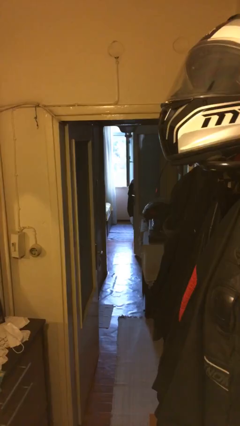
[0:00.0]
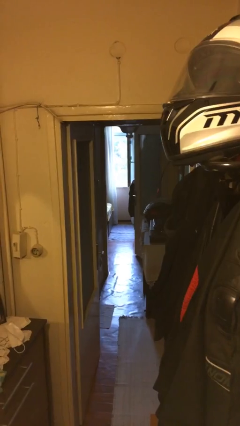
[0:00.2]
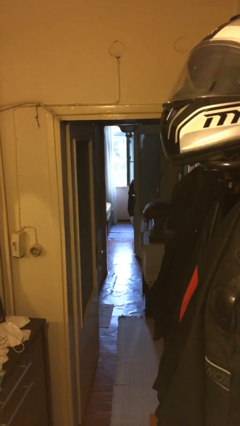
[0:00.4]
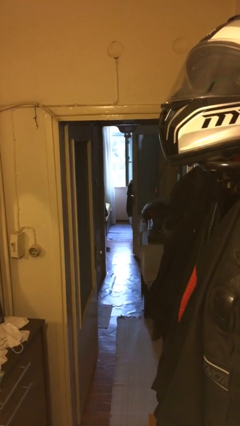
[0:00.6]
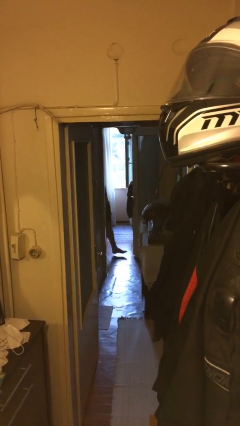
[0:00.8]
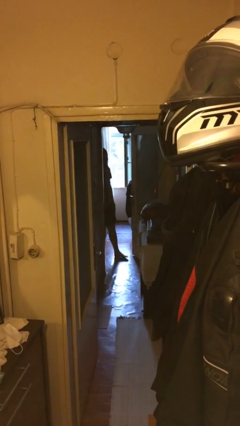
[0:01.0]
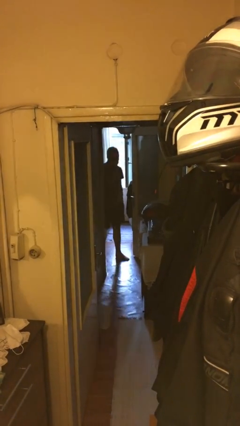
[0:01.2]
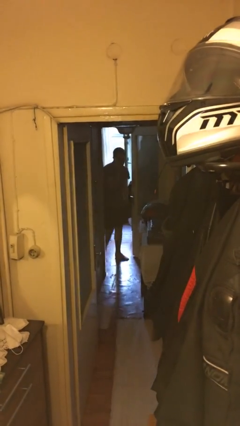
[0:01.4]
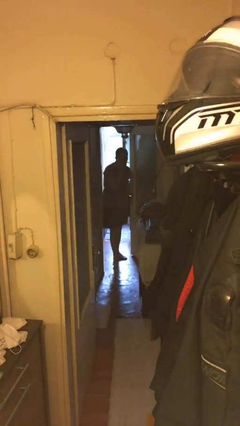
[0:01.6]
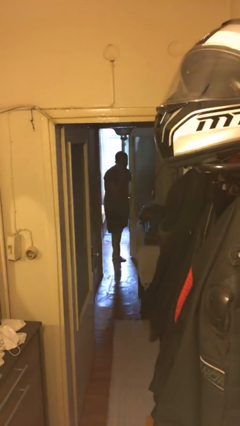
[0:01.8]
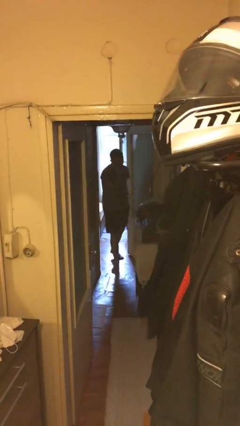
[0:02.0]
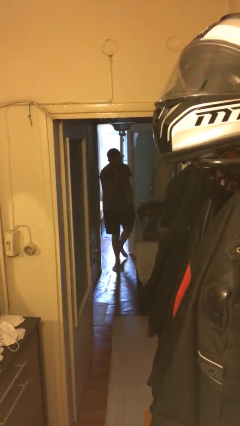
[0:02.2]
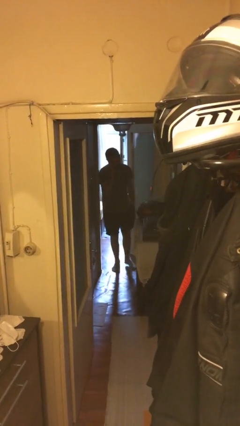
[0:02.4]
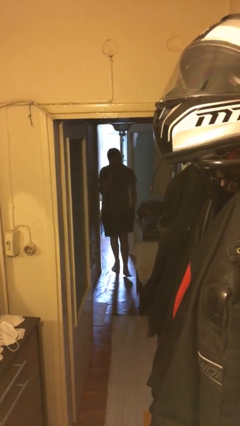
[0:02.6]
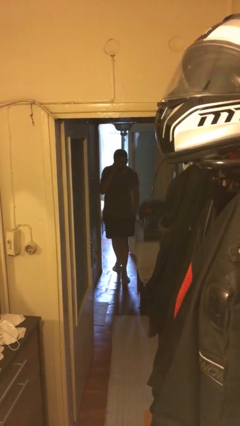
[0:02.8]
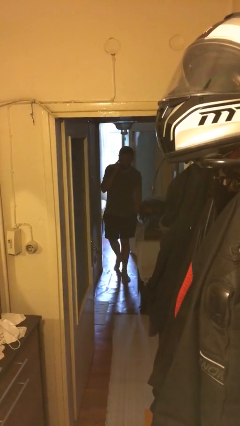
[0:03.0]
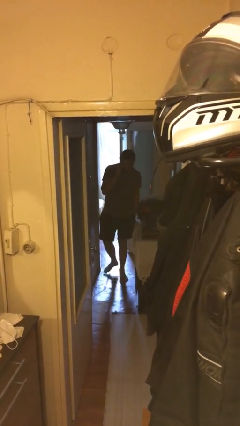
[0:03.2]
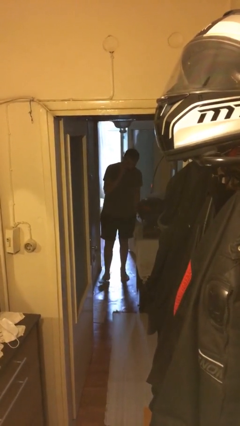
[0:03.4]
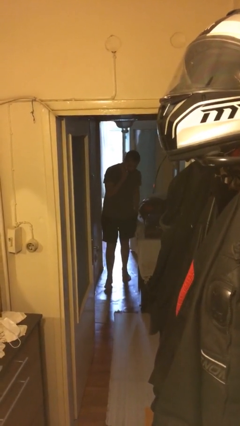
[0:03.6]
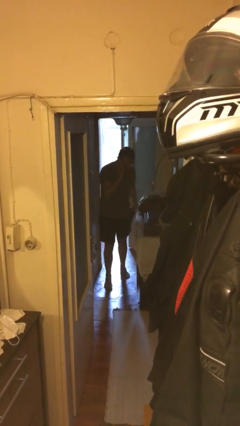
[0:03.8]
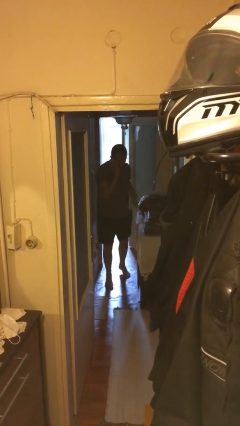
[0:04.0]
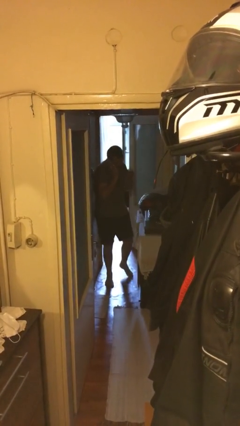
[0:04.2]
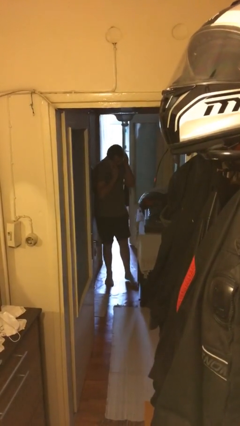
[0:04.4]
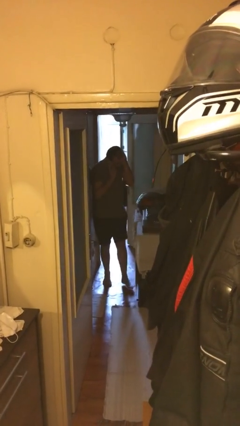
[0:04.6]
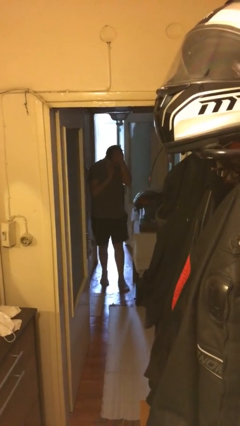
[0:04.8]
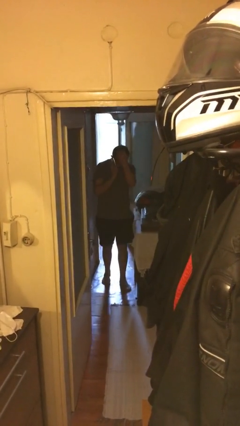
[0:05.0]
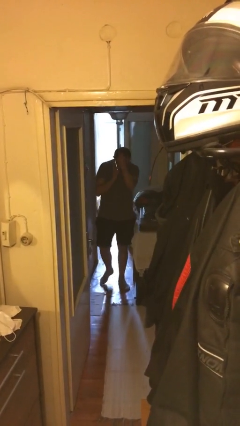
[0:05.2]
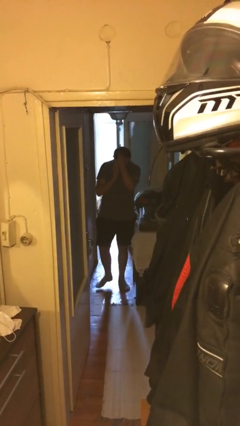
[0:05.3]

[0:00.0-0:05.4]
person enters scene through structure

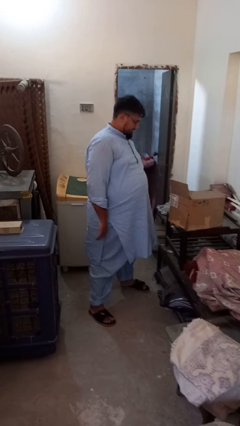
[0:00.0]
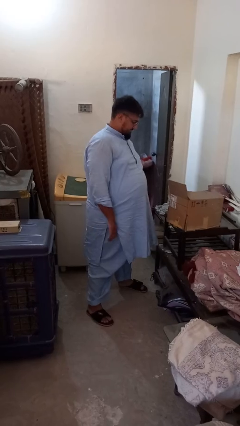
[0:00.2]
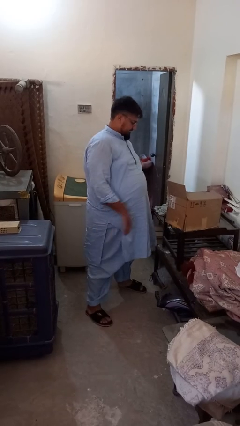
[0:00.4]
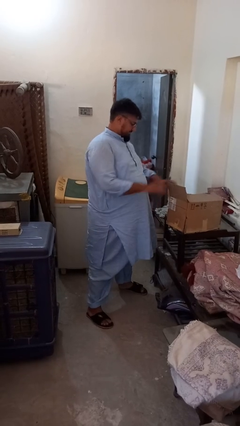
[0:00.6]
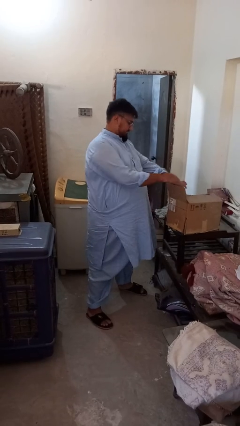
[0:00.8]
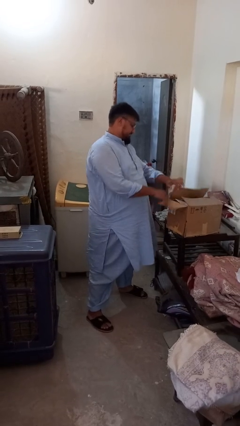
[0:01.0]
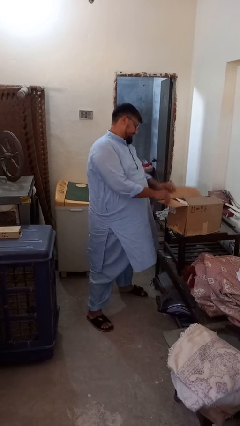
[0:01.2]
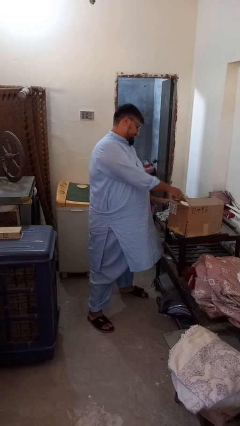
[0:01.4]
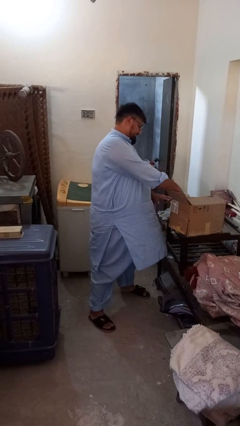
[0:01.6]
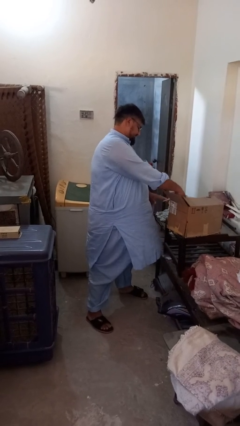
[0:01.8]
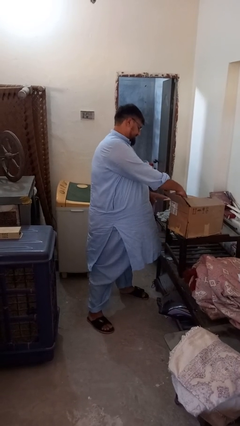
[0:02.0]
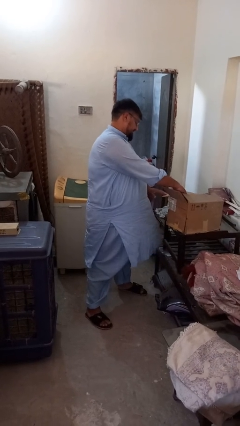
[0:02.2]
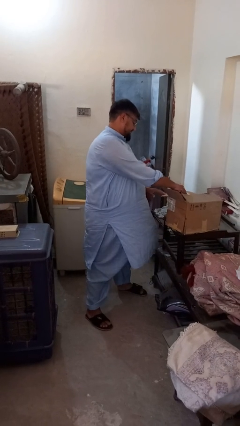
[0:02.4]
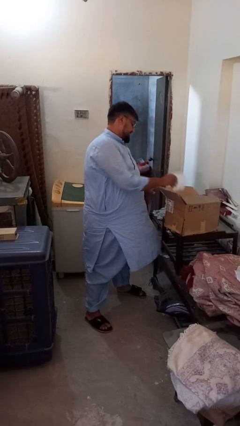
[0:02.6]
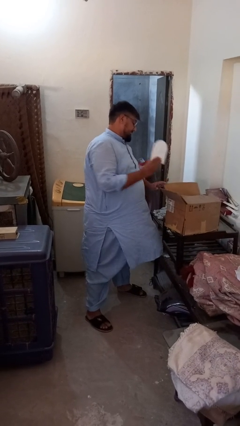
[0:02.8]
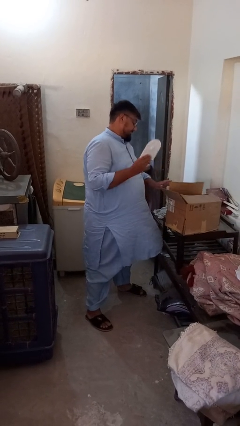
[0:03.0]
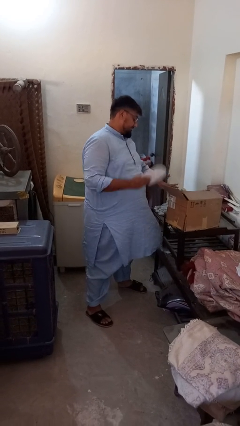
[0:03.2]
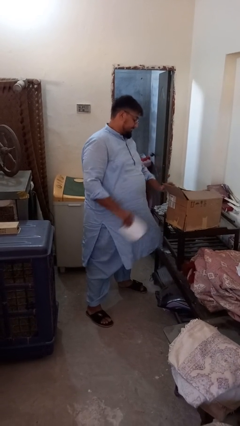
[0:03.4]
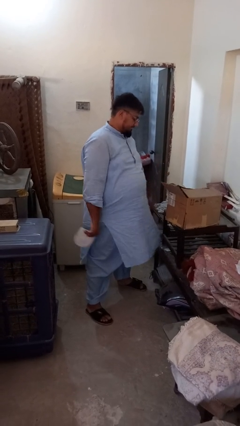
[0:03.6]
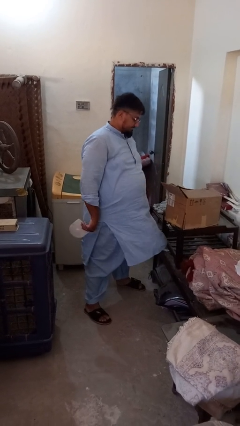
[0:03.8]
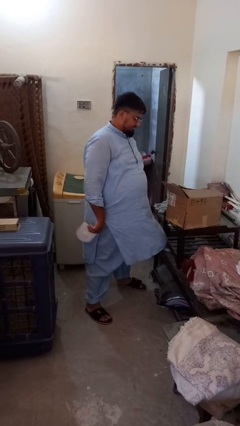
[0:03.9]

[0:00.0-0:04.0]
person takes object from box

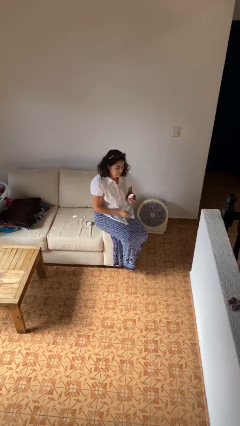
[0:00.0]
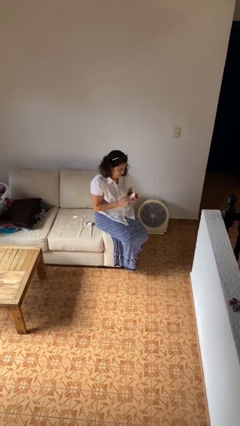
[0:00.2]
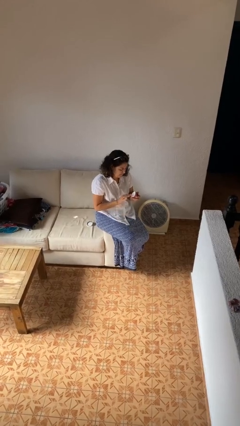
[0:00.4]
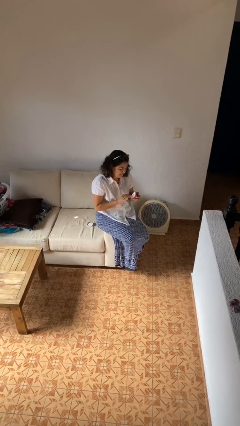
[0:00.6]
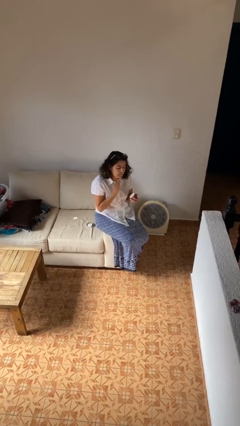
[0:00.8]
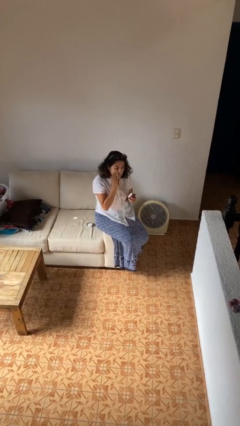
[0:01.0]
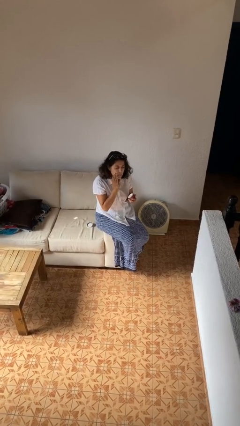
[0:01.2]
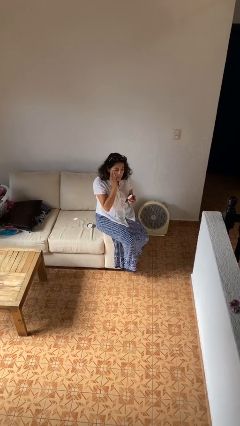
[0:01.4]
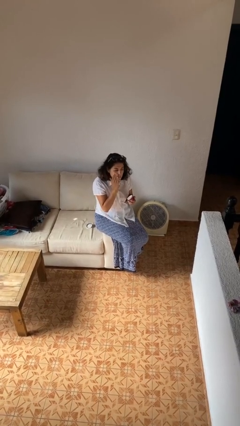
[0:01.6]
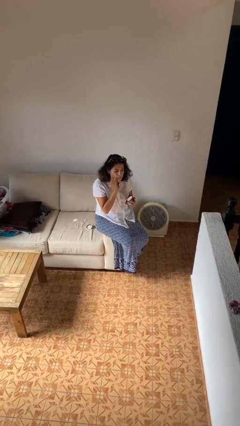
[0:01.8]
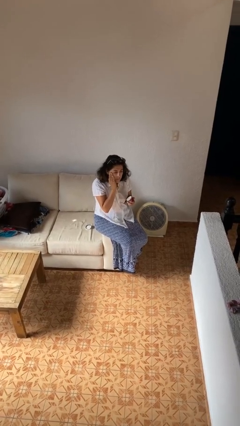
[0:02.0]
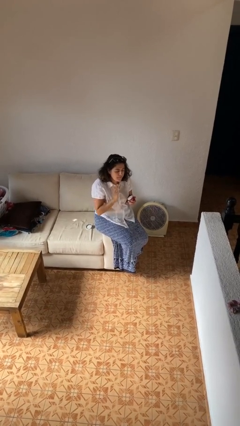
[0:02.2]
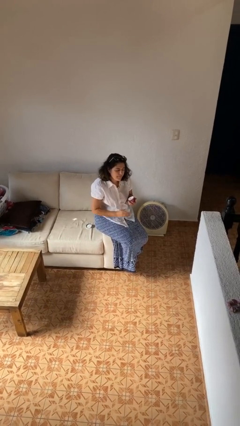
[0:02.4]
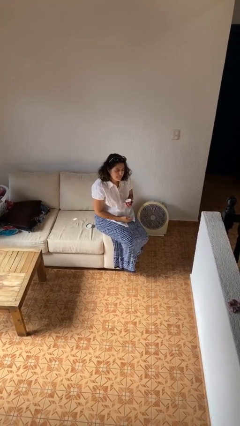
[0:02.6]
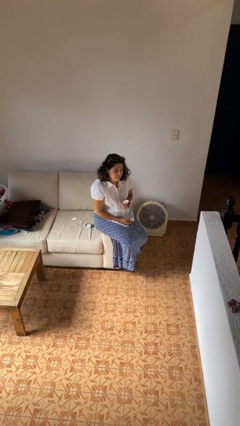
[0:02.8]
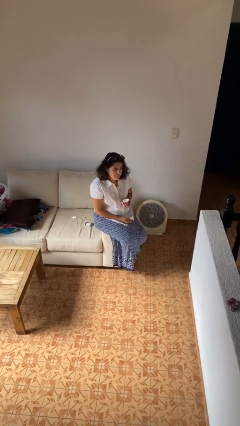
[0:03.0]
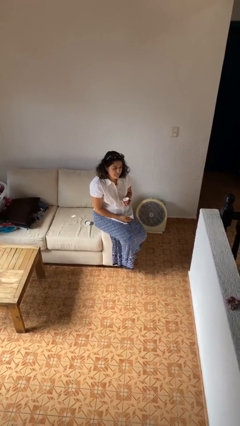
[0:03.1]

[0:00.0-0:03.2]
person applies facial moisturizer

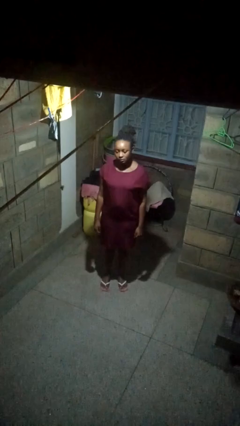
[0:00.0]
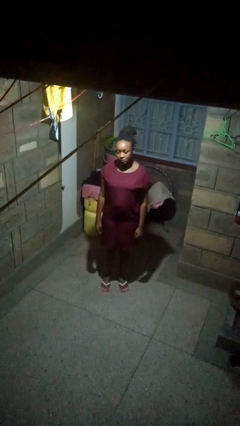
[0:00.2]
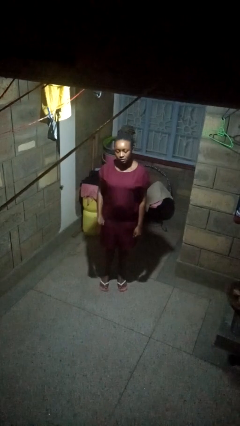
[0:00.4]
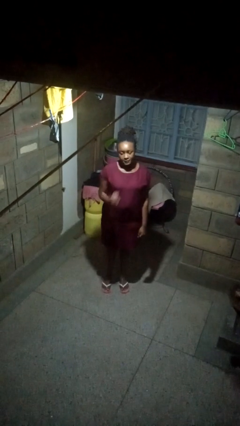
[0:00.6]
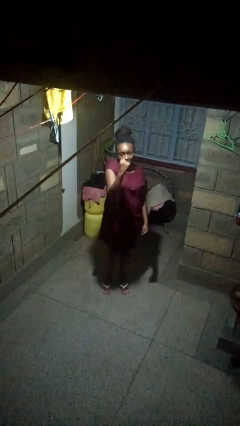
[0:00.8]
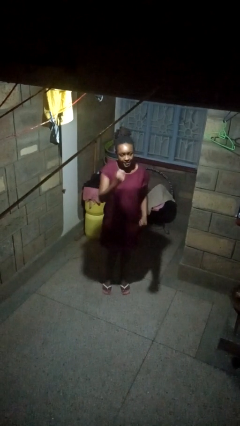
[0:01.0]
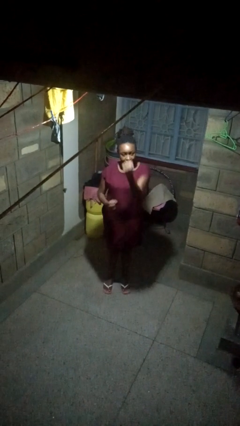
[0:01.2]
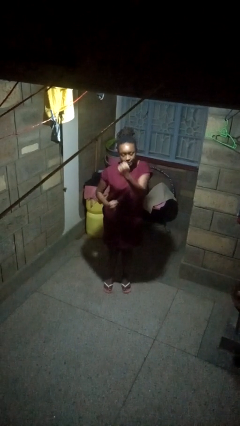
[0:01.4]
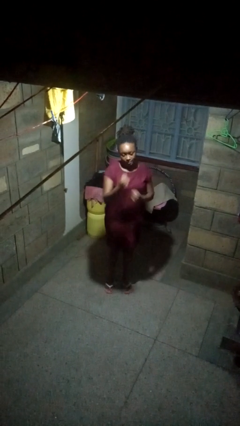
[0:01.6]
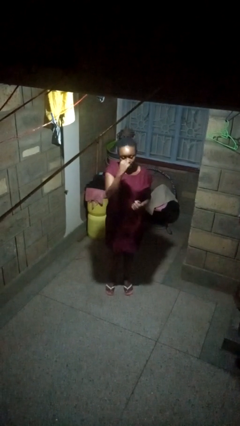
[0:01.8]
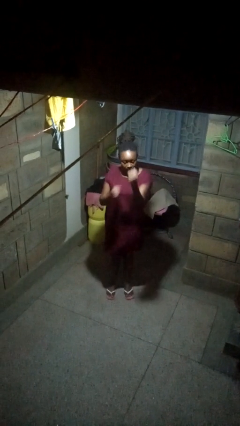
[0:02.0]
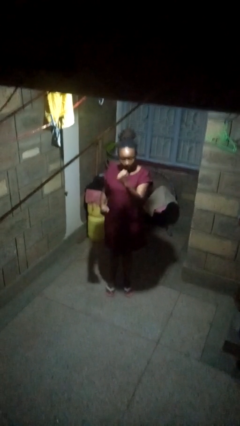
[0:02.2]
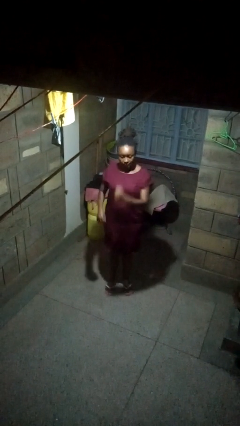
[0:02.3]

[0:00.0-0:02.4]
person punches

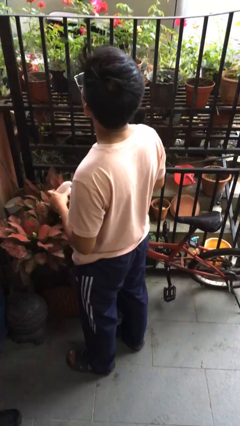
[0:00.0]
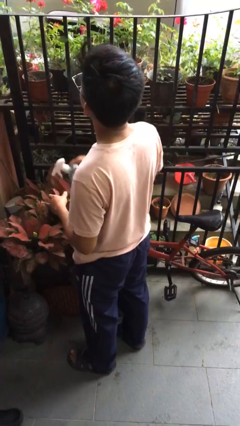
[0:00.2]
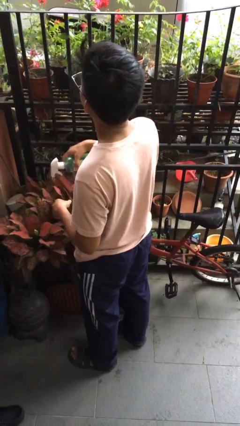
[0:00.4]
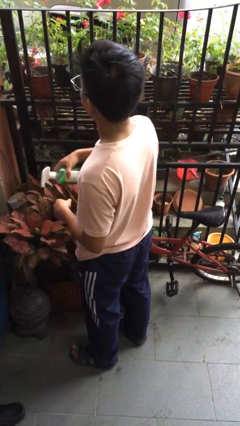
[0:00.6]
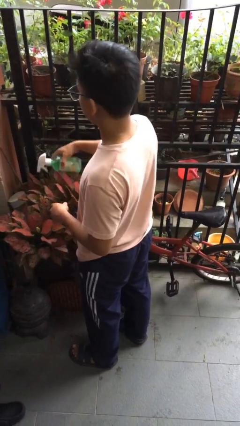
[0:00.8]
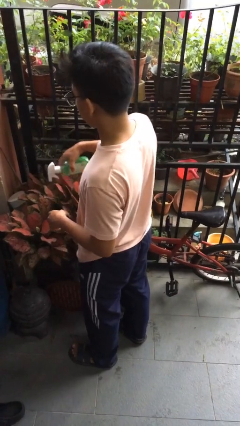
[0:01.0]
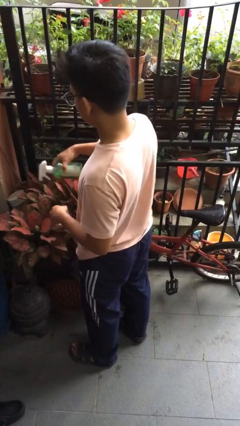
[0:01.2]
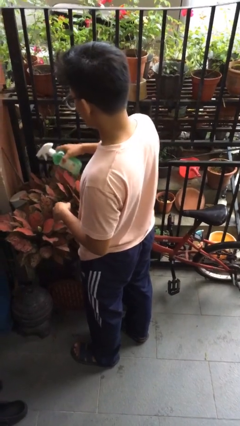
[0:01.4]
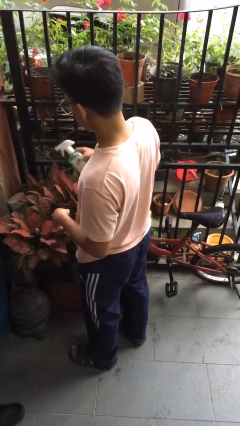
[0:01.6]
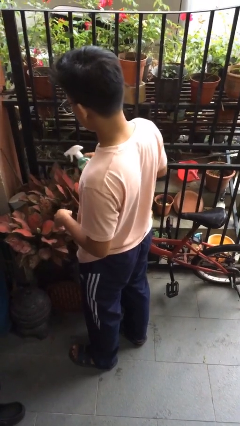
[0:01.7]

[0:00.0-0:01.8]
person waters houseplant

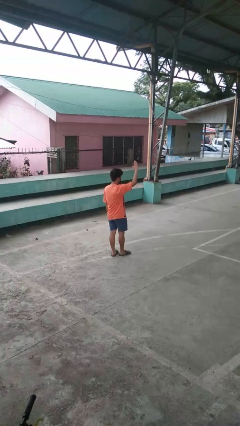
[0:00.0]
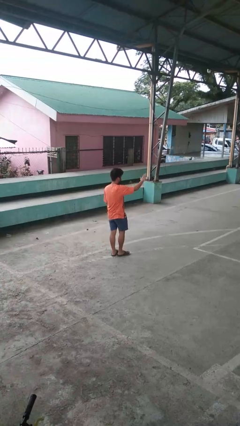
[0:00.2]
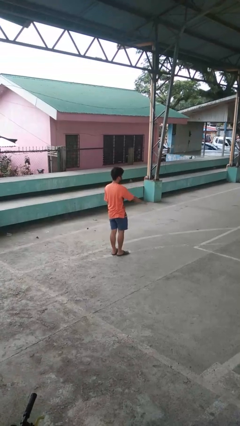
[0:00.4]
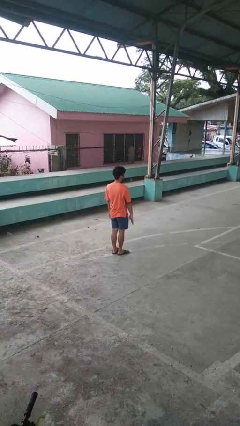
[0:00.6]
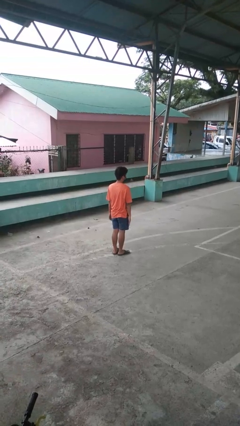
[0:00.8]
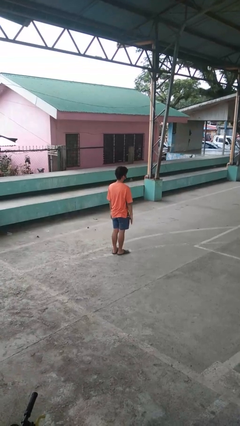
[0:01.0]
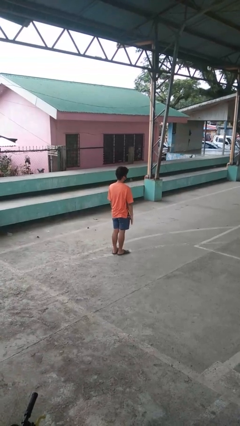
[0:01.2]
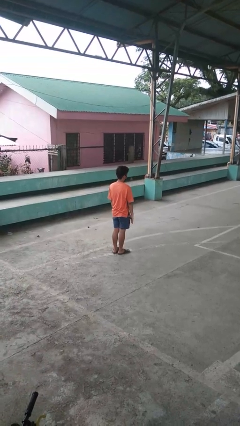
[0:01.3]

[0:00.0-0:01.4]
person gestures lower hand
